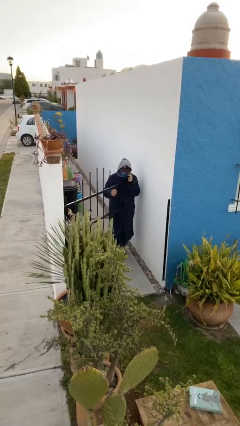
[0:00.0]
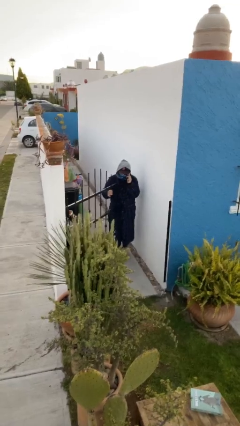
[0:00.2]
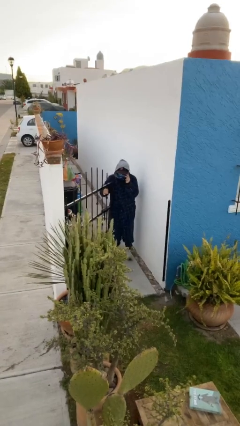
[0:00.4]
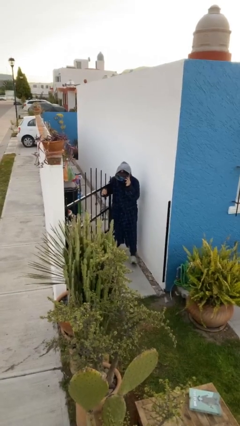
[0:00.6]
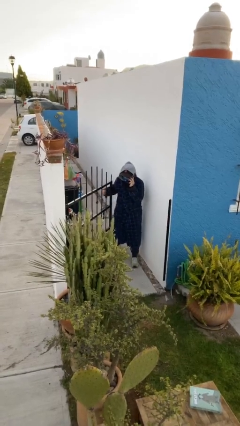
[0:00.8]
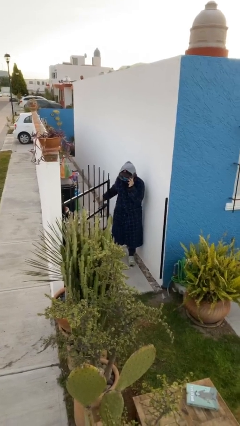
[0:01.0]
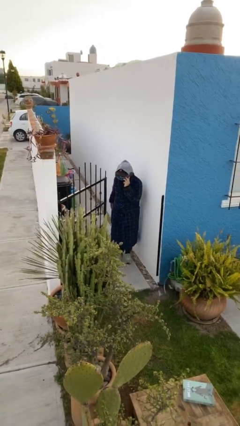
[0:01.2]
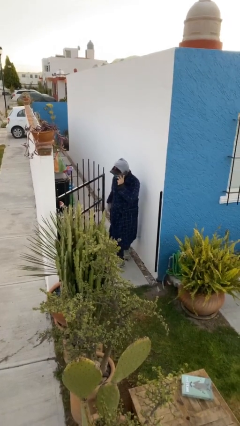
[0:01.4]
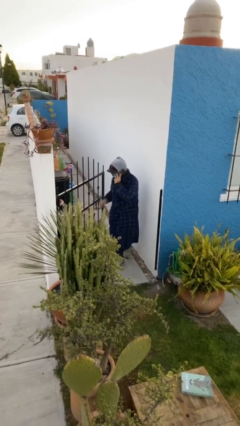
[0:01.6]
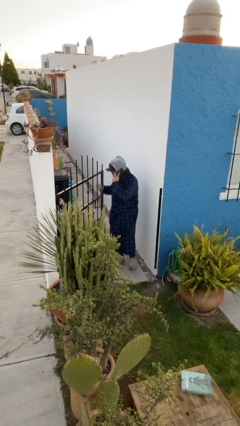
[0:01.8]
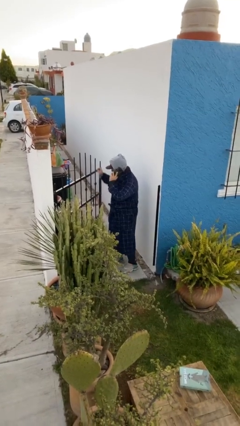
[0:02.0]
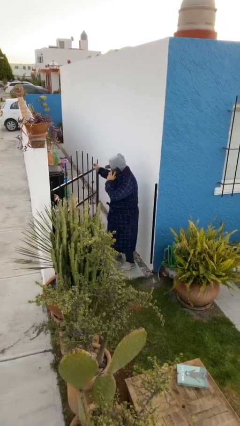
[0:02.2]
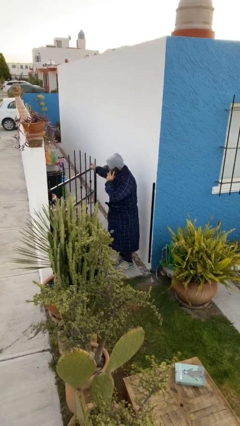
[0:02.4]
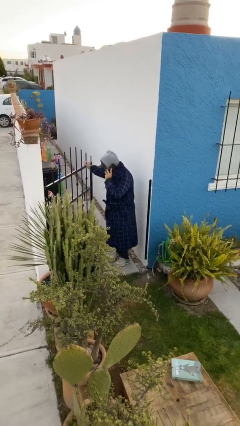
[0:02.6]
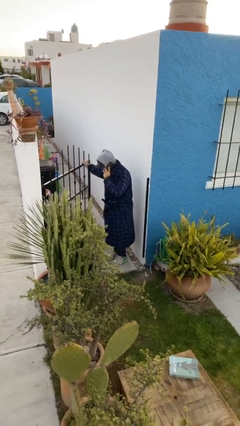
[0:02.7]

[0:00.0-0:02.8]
person enters scene through structure

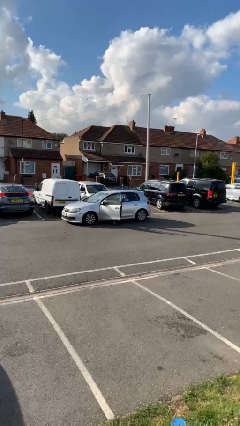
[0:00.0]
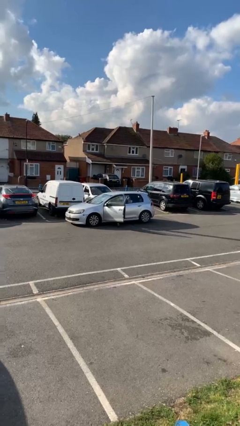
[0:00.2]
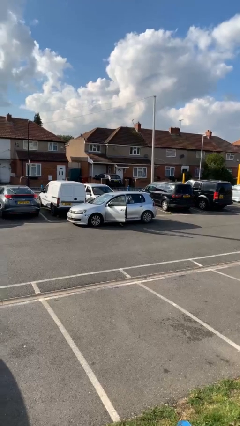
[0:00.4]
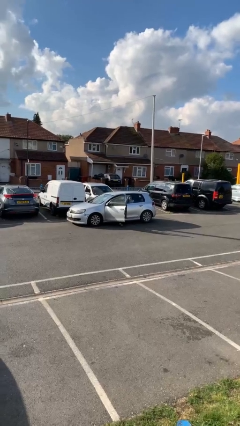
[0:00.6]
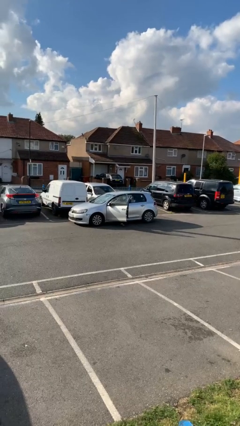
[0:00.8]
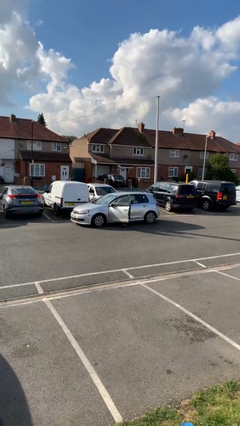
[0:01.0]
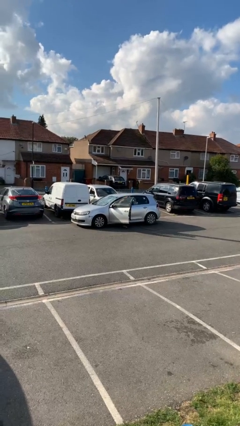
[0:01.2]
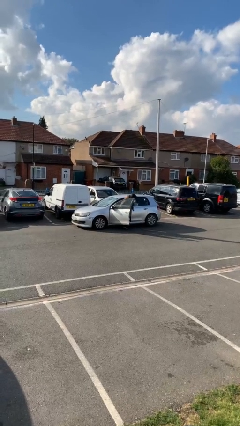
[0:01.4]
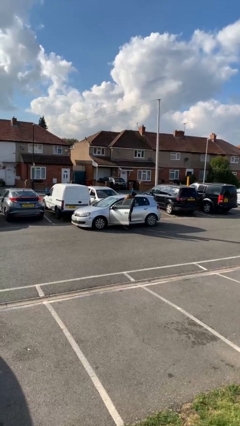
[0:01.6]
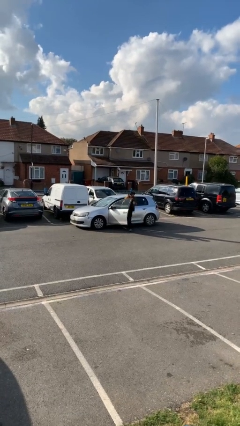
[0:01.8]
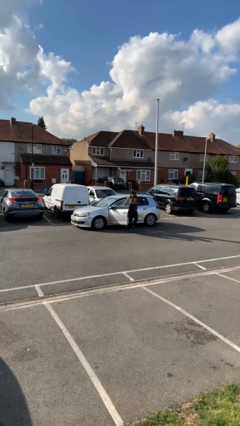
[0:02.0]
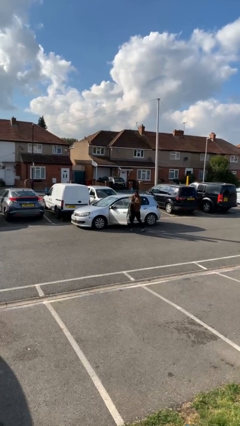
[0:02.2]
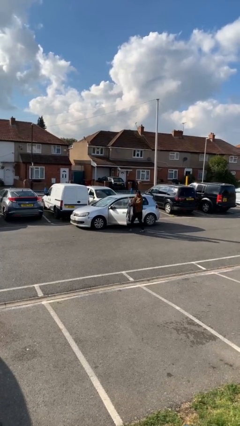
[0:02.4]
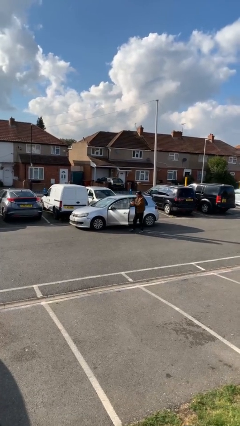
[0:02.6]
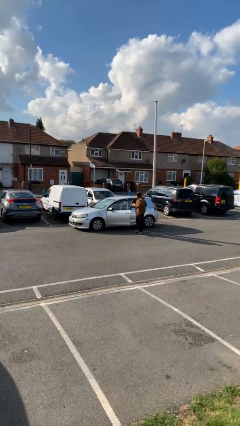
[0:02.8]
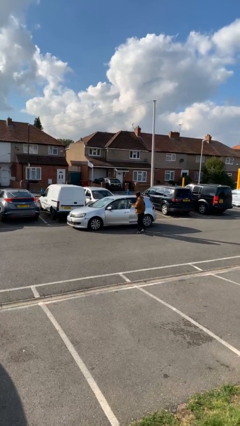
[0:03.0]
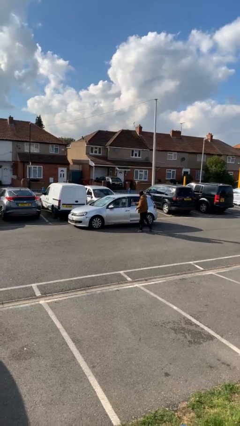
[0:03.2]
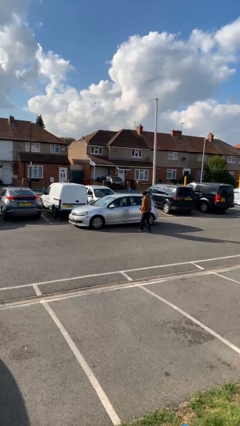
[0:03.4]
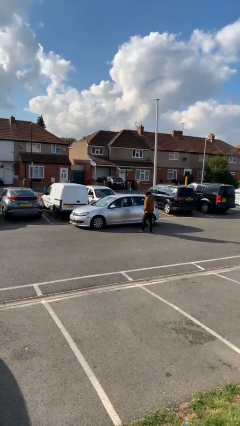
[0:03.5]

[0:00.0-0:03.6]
car drops off person

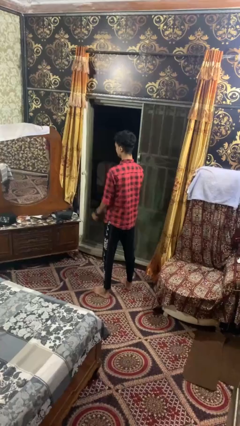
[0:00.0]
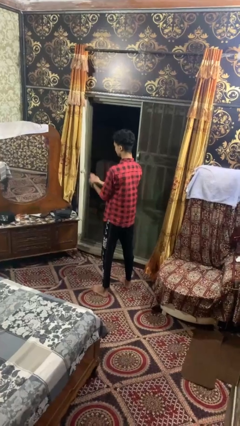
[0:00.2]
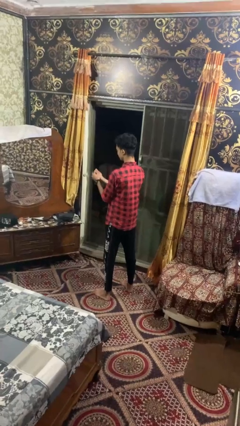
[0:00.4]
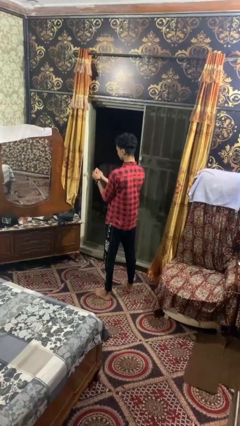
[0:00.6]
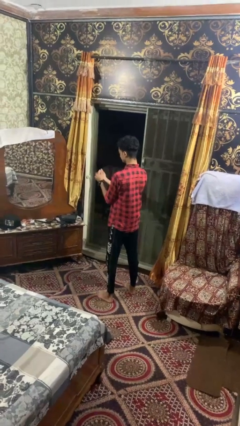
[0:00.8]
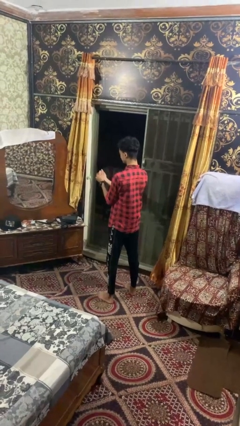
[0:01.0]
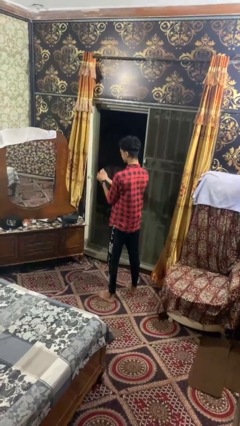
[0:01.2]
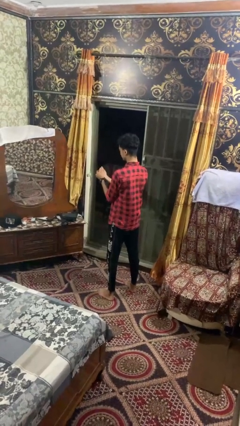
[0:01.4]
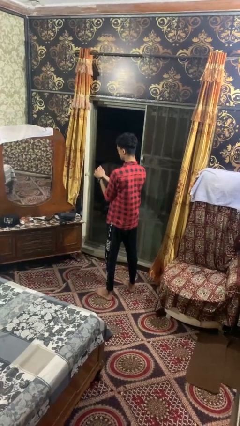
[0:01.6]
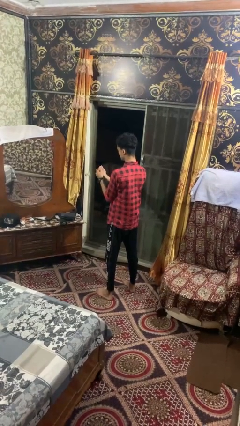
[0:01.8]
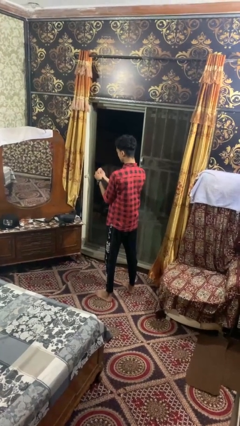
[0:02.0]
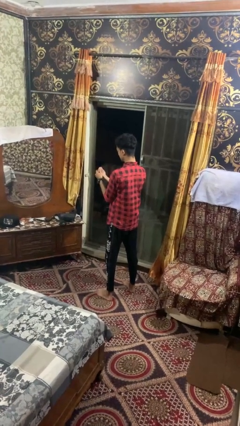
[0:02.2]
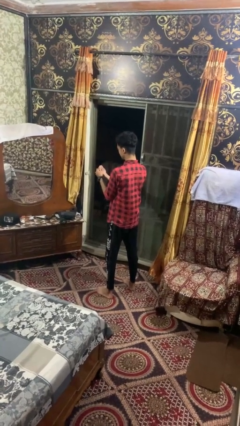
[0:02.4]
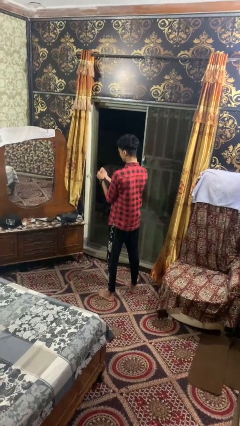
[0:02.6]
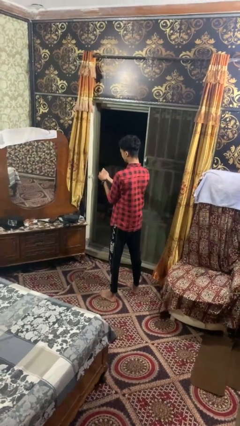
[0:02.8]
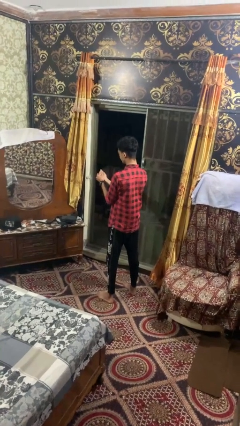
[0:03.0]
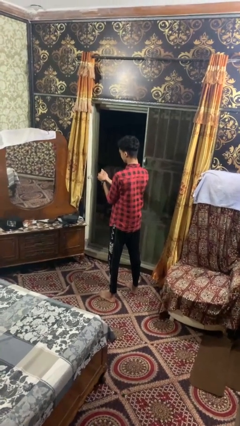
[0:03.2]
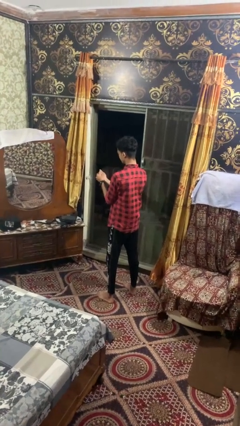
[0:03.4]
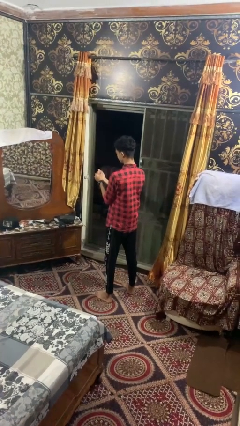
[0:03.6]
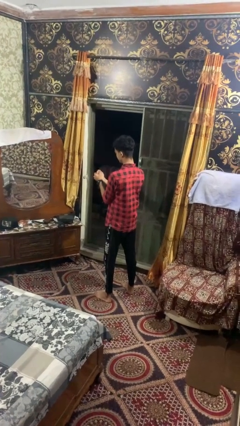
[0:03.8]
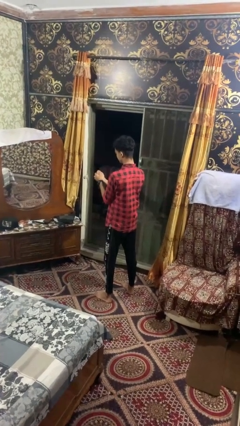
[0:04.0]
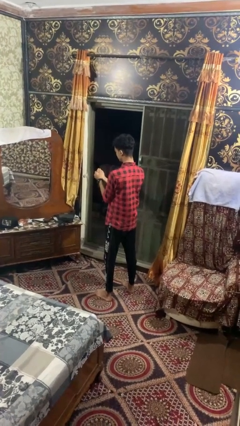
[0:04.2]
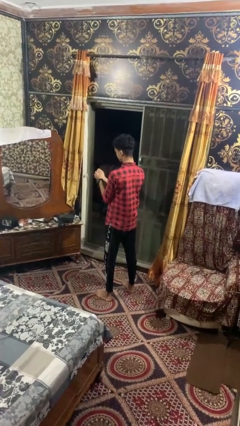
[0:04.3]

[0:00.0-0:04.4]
person cracks knuckles

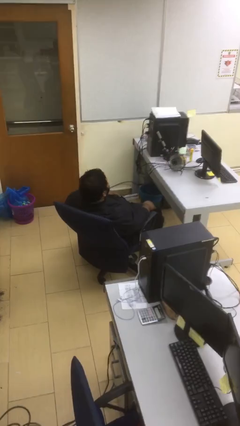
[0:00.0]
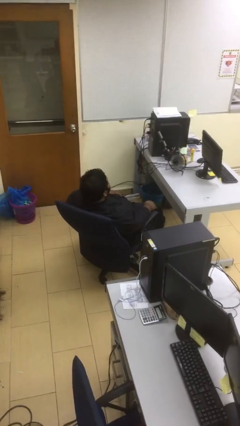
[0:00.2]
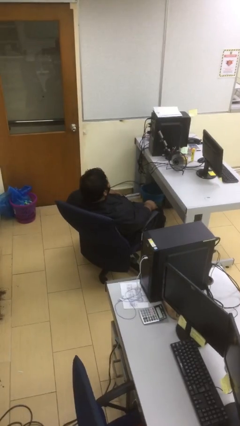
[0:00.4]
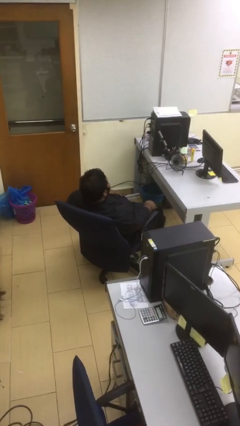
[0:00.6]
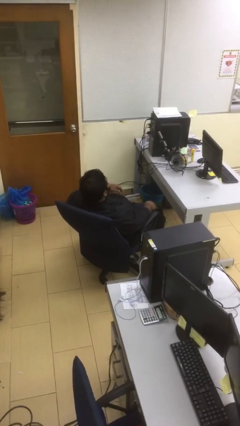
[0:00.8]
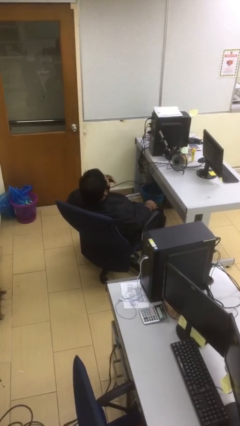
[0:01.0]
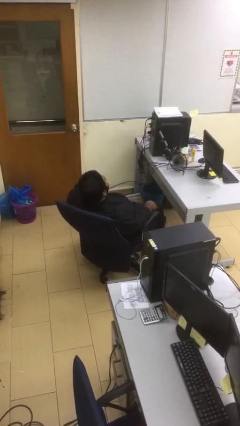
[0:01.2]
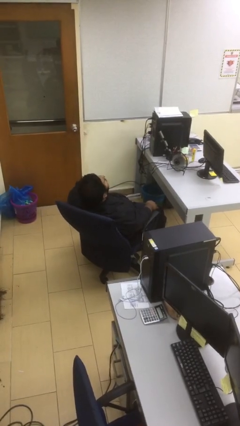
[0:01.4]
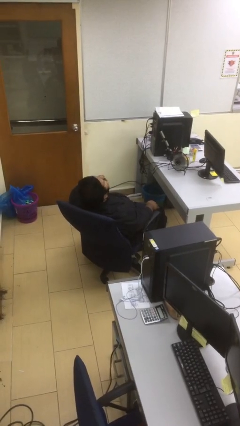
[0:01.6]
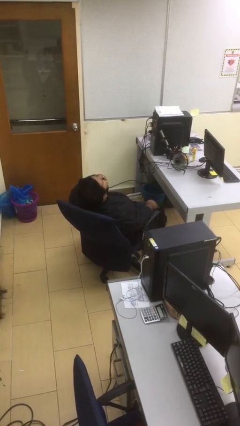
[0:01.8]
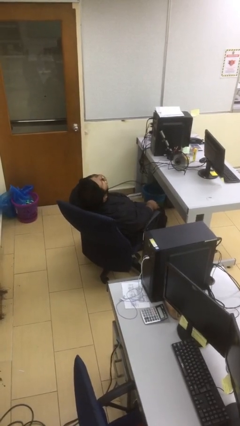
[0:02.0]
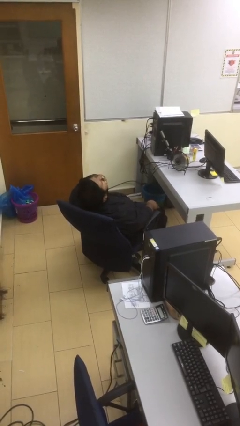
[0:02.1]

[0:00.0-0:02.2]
person yawns

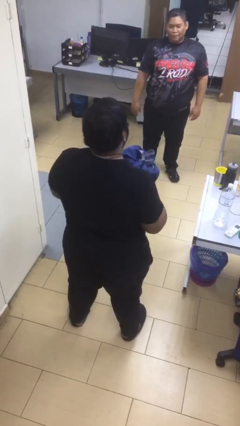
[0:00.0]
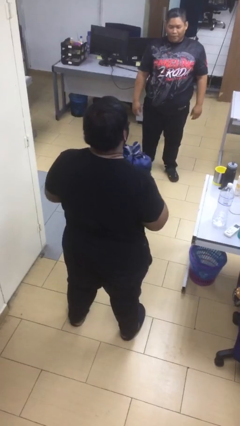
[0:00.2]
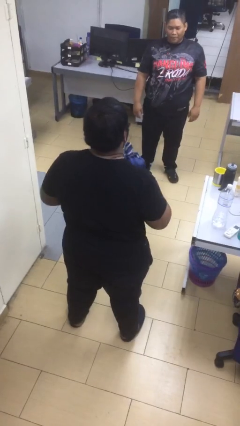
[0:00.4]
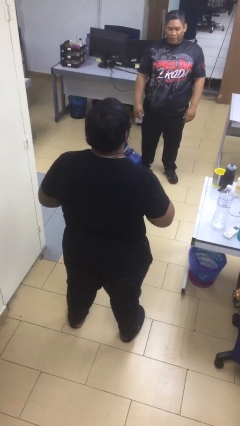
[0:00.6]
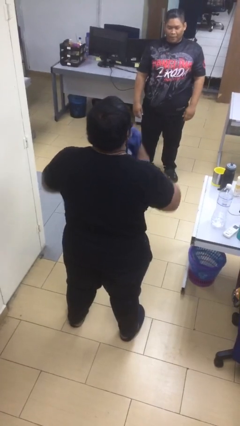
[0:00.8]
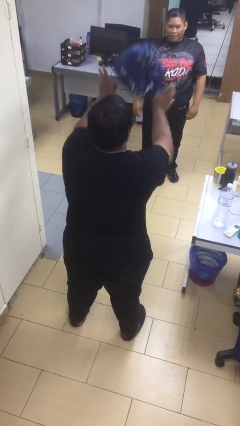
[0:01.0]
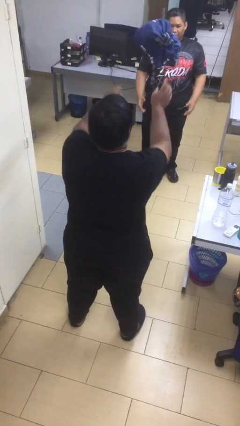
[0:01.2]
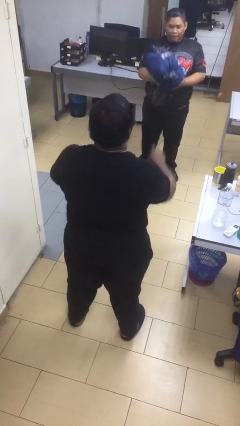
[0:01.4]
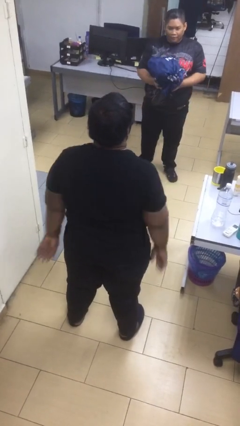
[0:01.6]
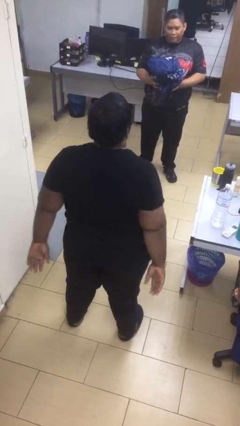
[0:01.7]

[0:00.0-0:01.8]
person throws object to person

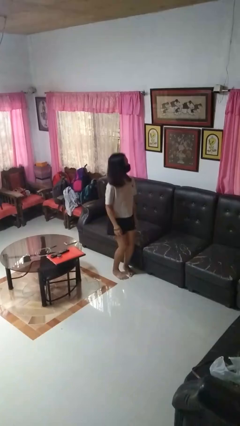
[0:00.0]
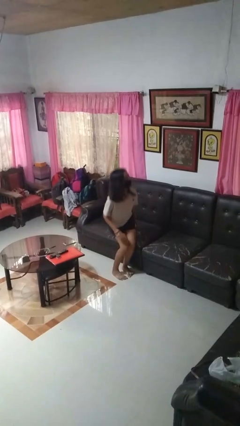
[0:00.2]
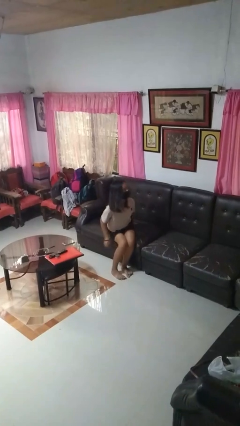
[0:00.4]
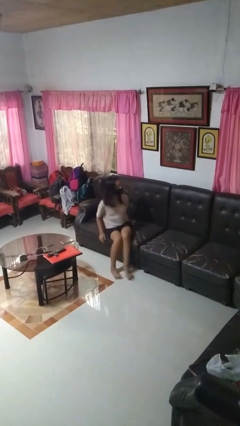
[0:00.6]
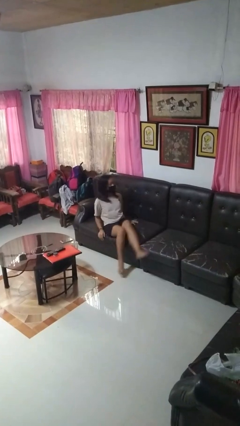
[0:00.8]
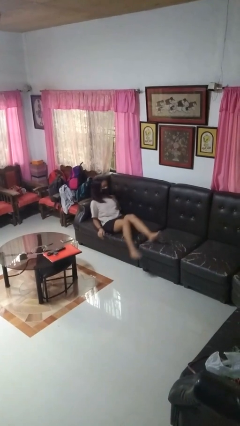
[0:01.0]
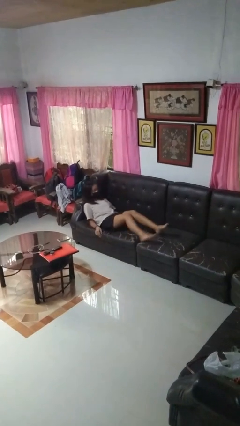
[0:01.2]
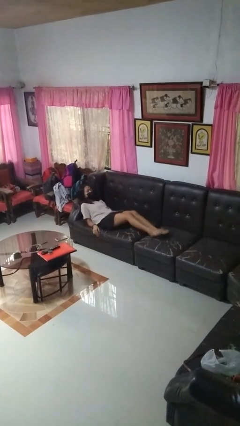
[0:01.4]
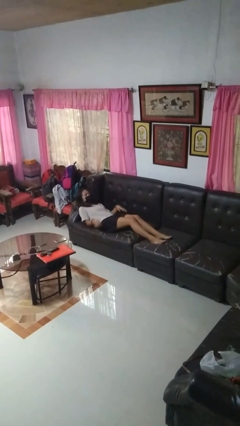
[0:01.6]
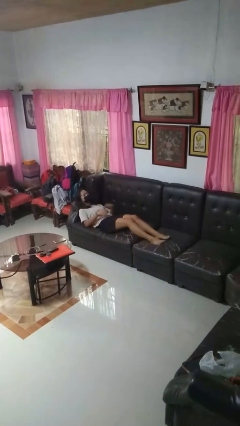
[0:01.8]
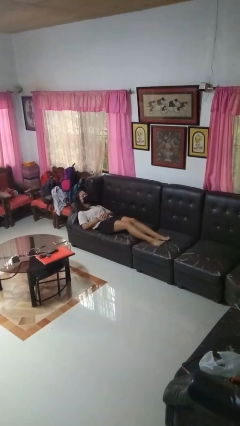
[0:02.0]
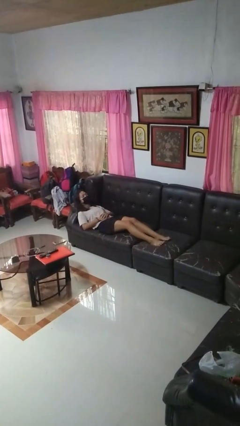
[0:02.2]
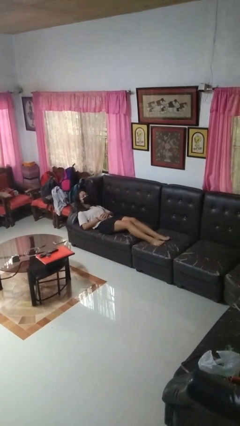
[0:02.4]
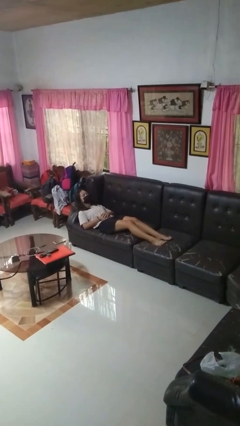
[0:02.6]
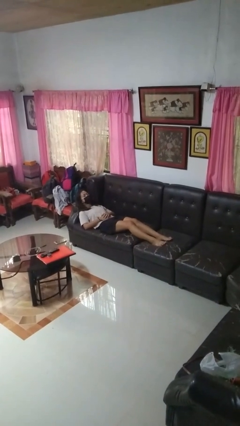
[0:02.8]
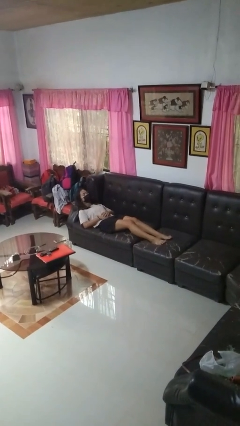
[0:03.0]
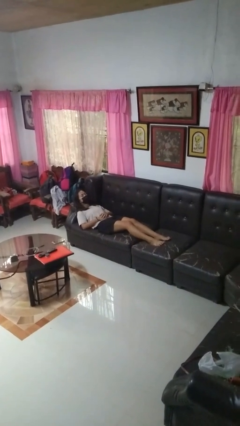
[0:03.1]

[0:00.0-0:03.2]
person lies down on couch
